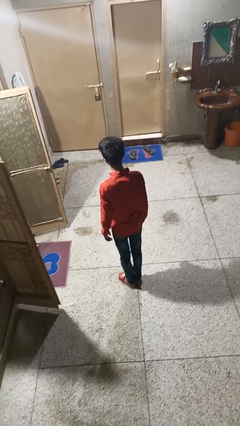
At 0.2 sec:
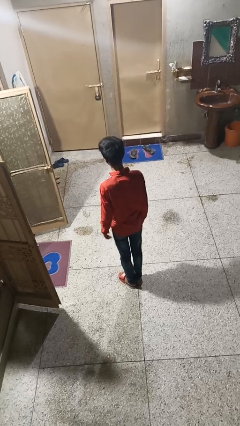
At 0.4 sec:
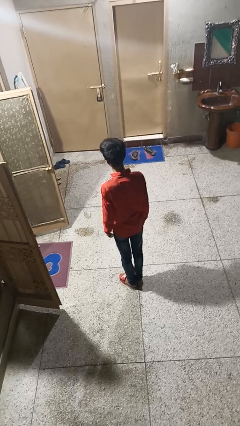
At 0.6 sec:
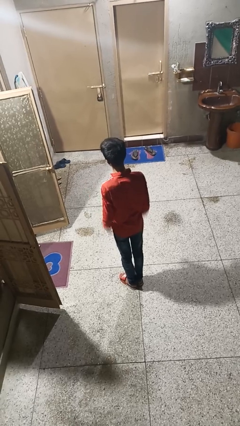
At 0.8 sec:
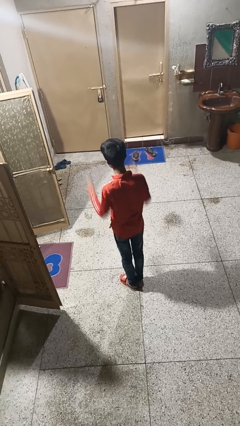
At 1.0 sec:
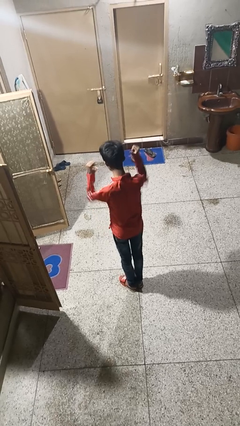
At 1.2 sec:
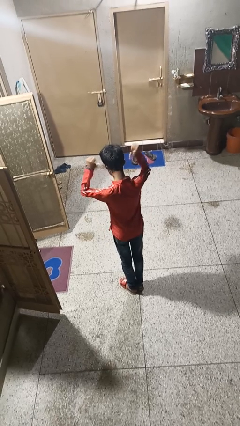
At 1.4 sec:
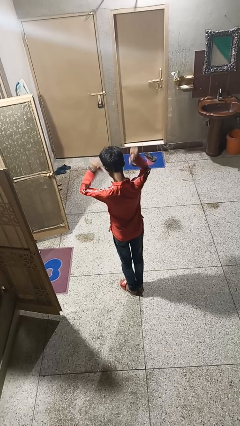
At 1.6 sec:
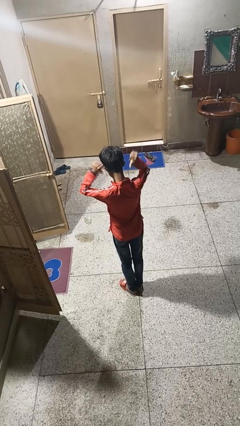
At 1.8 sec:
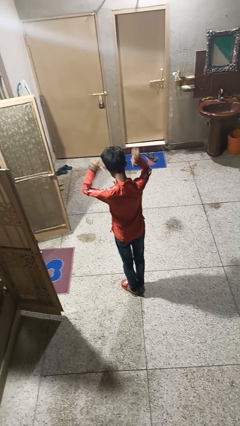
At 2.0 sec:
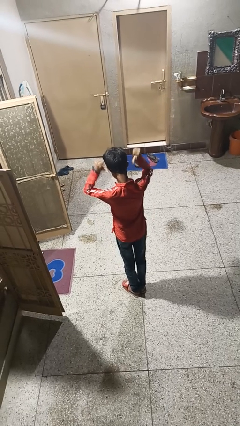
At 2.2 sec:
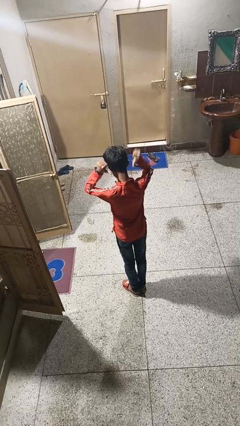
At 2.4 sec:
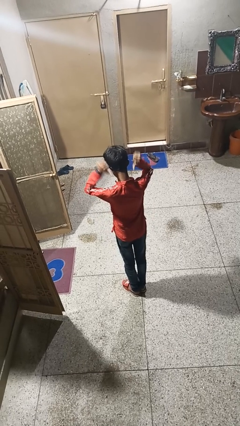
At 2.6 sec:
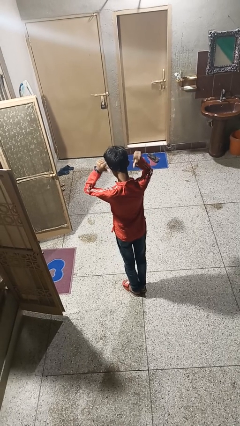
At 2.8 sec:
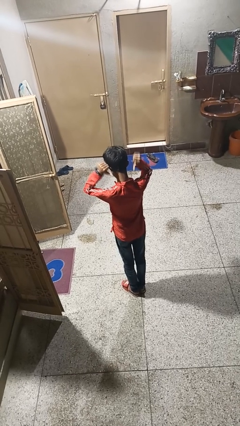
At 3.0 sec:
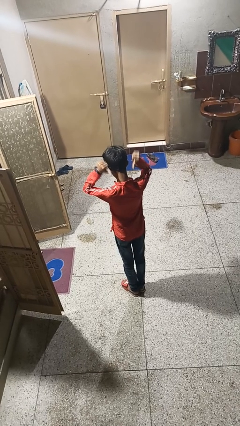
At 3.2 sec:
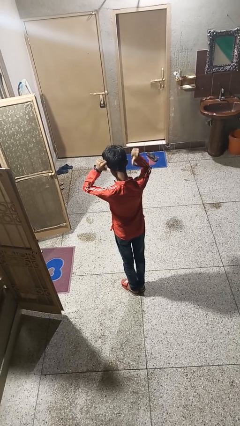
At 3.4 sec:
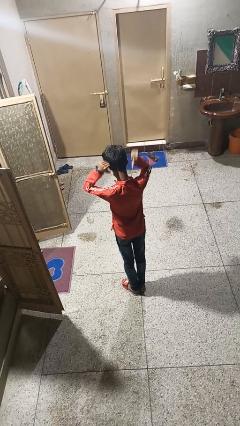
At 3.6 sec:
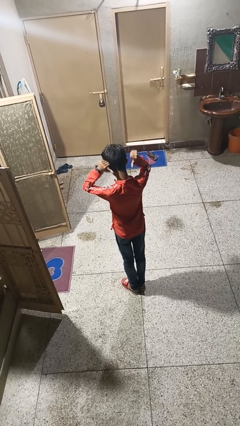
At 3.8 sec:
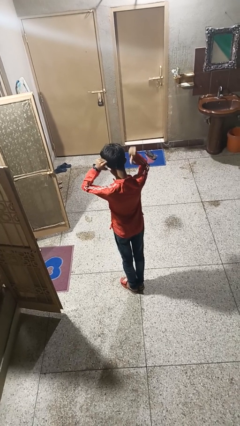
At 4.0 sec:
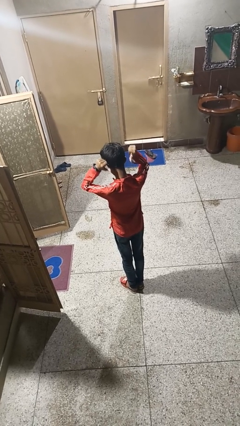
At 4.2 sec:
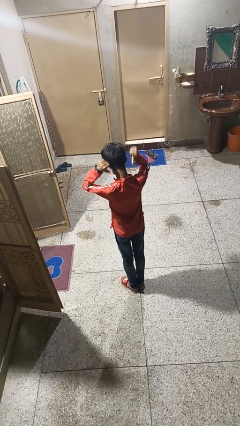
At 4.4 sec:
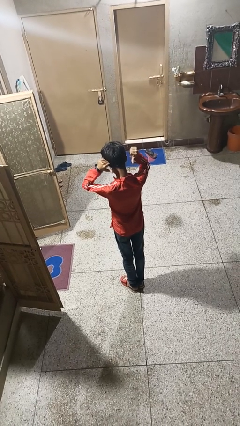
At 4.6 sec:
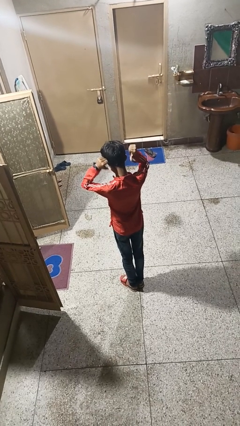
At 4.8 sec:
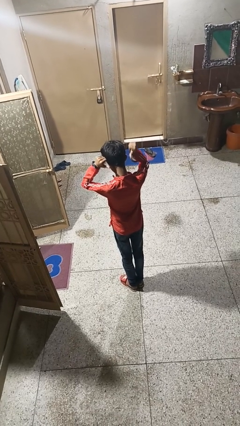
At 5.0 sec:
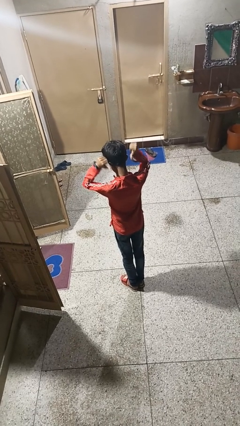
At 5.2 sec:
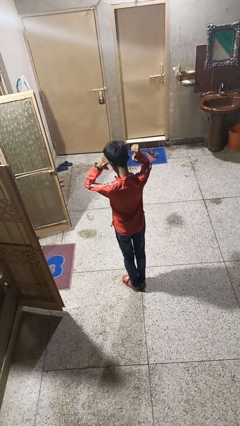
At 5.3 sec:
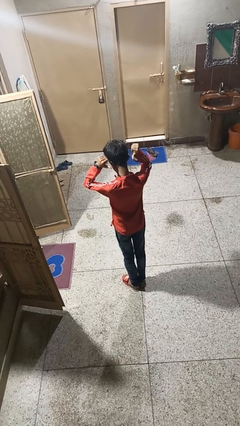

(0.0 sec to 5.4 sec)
person gestures behind me

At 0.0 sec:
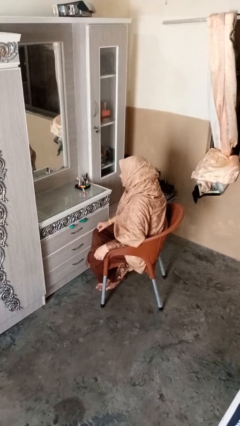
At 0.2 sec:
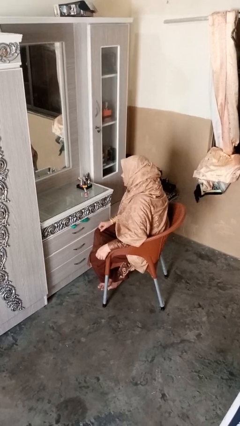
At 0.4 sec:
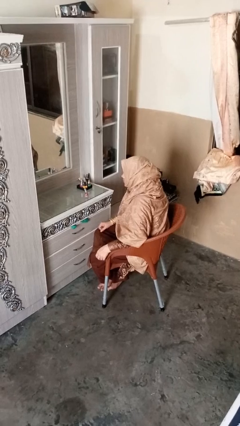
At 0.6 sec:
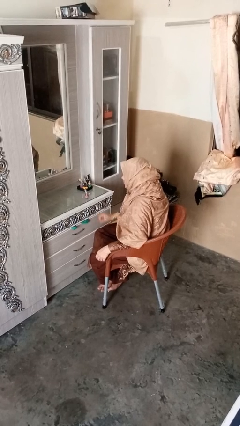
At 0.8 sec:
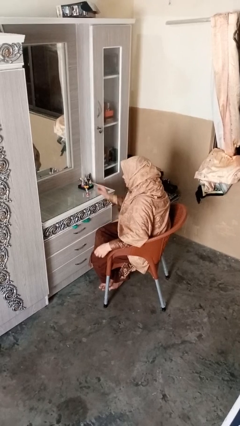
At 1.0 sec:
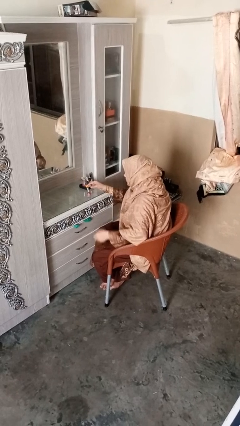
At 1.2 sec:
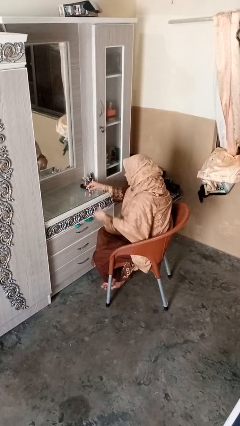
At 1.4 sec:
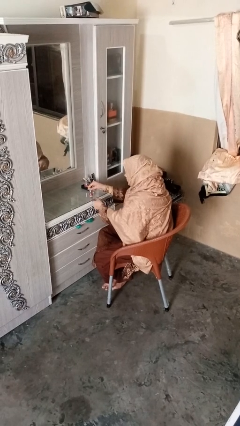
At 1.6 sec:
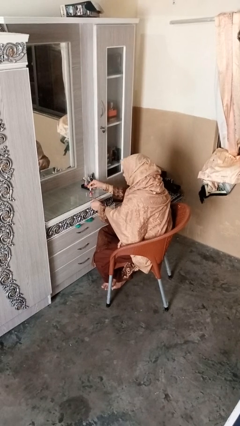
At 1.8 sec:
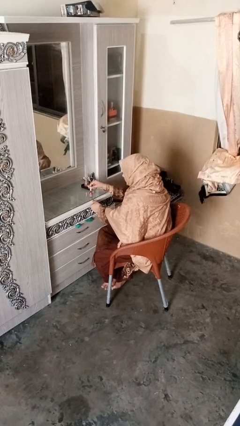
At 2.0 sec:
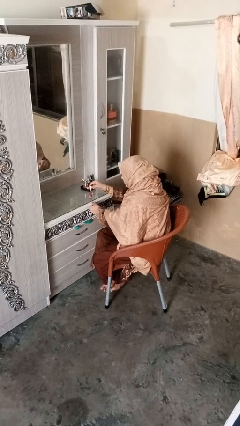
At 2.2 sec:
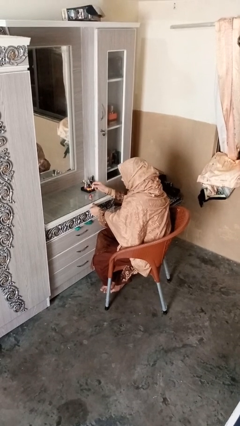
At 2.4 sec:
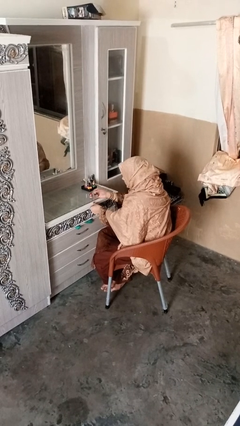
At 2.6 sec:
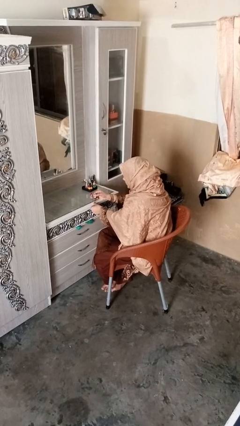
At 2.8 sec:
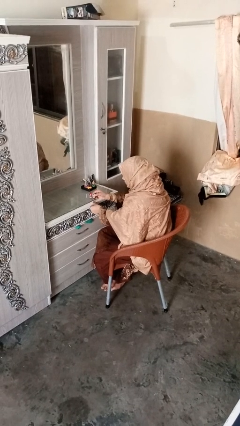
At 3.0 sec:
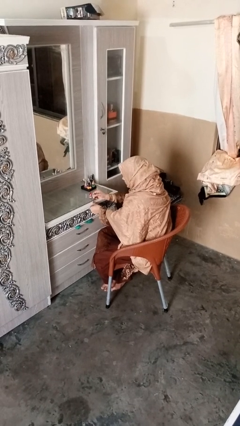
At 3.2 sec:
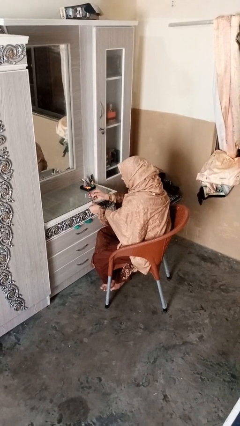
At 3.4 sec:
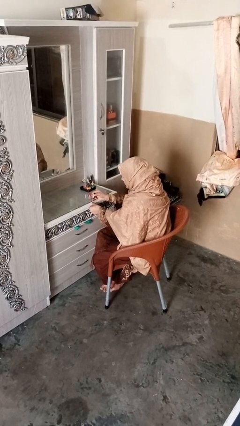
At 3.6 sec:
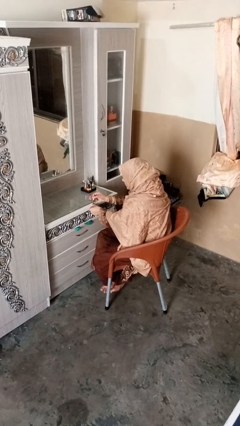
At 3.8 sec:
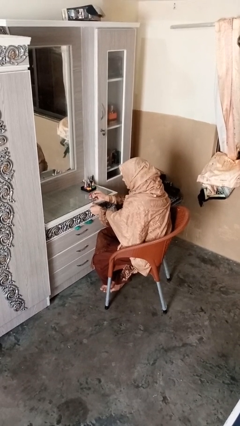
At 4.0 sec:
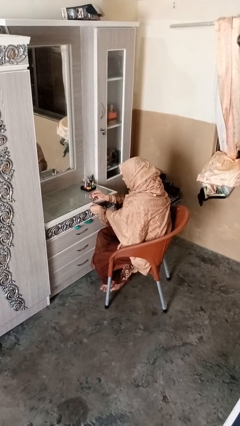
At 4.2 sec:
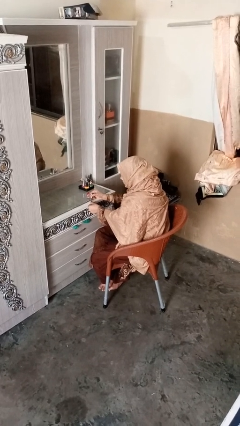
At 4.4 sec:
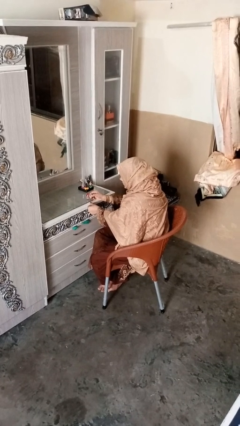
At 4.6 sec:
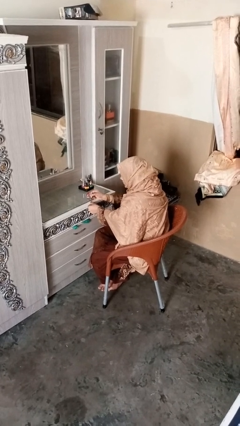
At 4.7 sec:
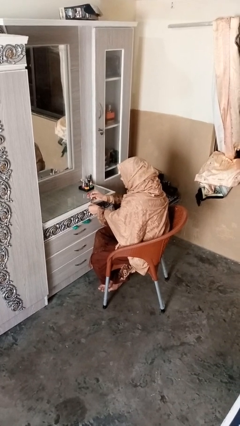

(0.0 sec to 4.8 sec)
person paints fingernails

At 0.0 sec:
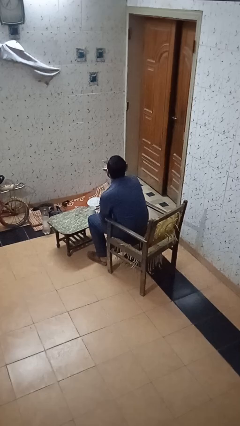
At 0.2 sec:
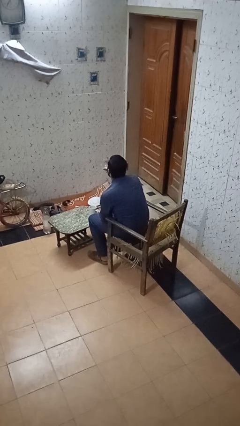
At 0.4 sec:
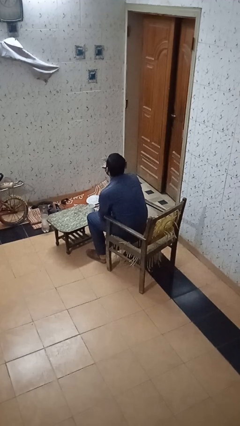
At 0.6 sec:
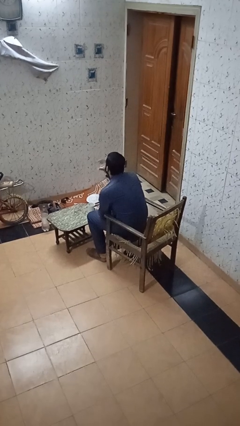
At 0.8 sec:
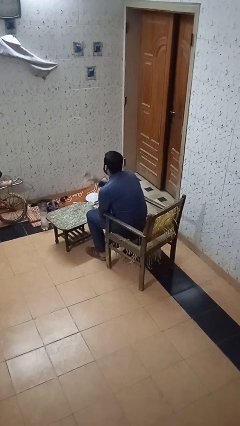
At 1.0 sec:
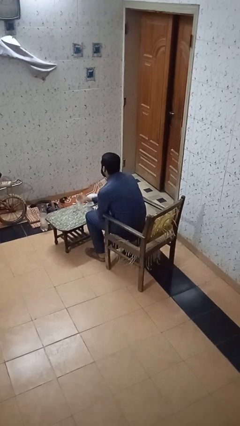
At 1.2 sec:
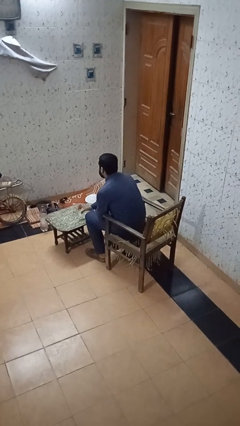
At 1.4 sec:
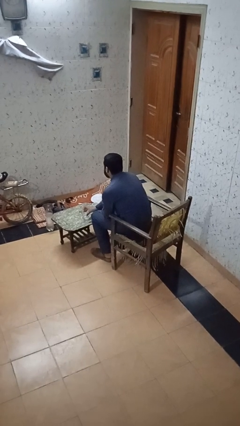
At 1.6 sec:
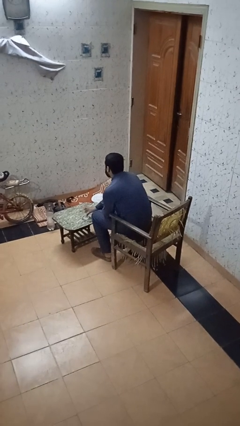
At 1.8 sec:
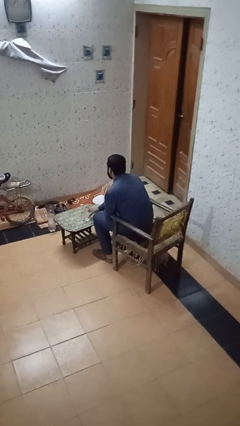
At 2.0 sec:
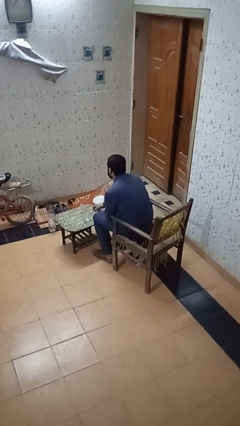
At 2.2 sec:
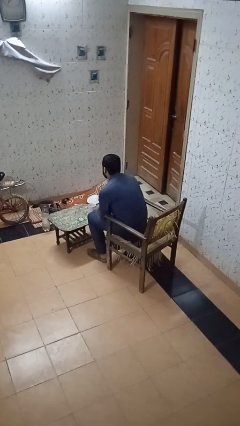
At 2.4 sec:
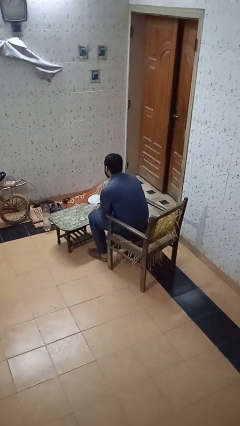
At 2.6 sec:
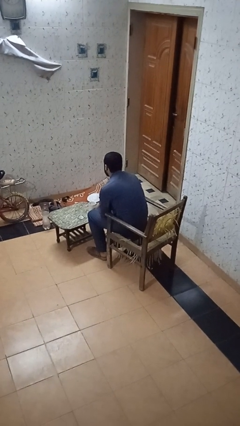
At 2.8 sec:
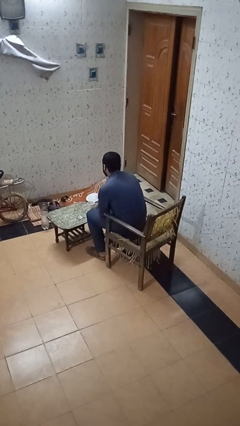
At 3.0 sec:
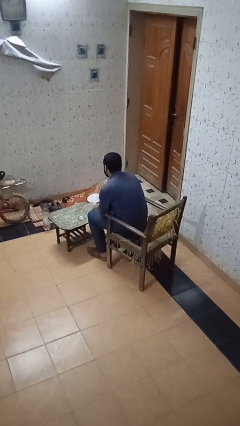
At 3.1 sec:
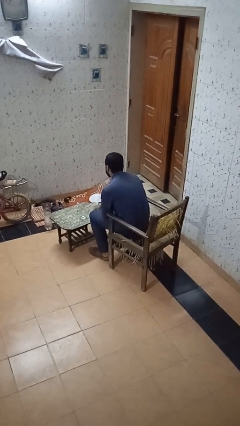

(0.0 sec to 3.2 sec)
person puts down object on table

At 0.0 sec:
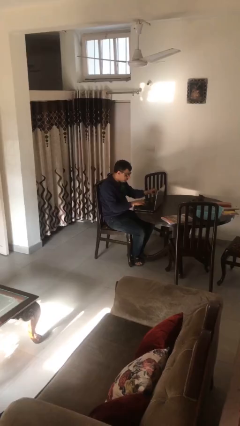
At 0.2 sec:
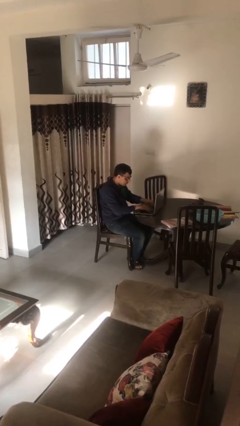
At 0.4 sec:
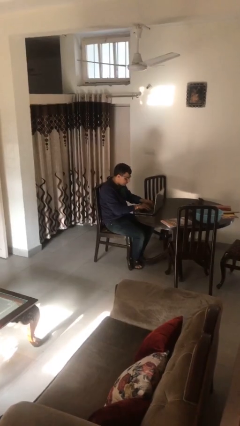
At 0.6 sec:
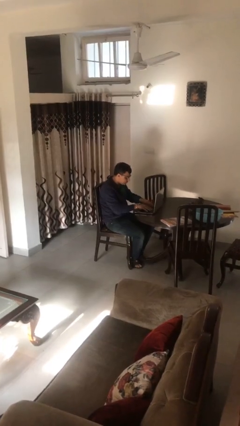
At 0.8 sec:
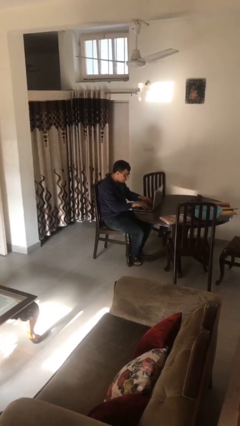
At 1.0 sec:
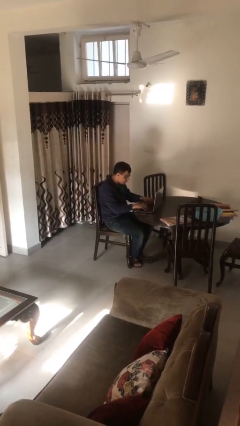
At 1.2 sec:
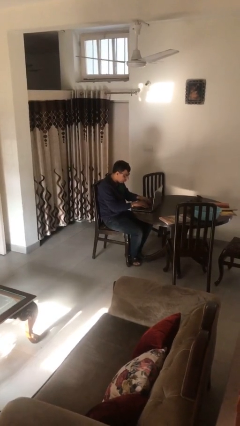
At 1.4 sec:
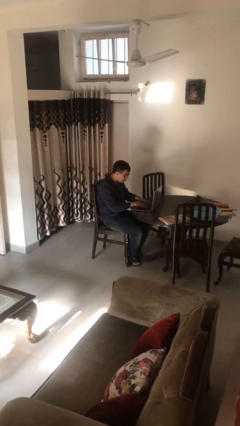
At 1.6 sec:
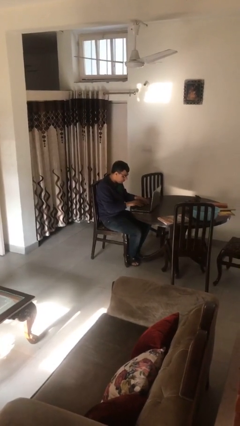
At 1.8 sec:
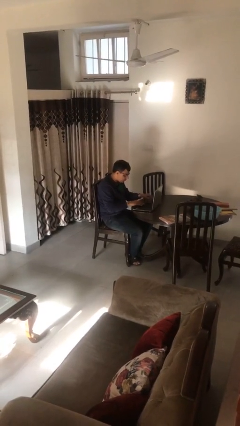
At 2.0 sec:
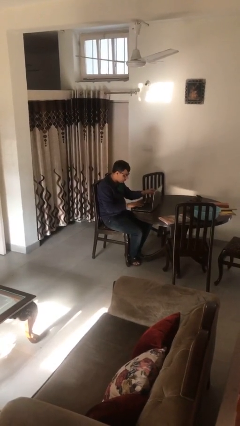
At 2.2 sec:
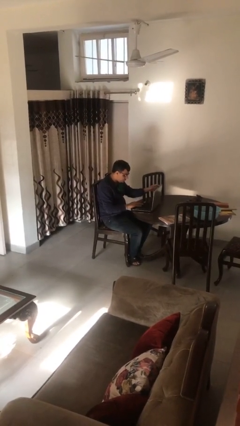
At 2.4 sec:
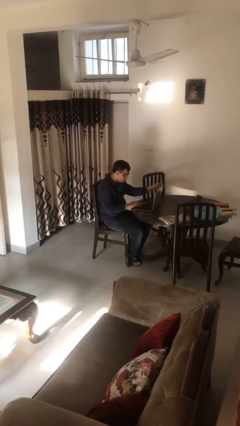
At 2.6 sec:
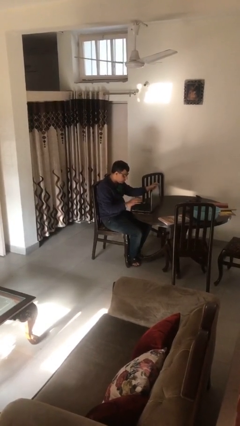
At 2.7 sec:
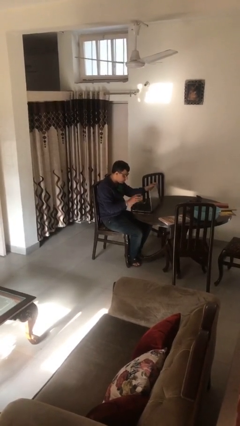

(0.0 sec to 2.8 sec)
person interacts with laptop

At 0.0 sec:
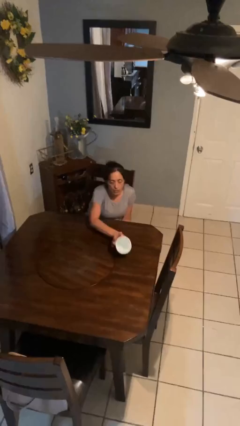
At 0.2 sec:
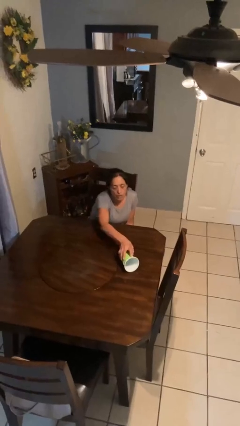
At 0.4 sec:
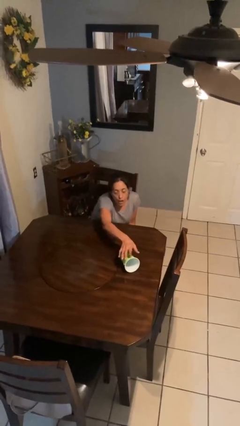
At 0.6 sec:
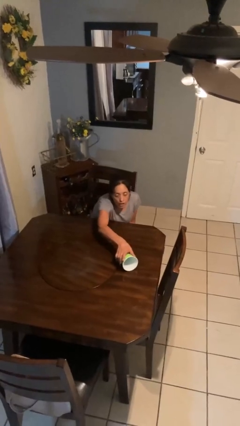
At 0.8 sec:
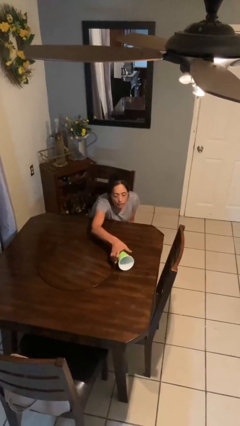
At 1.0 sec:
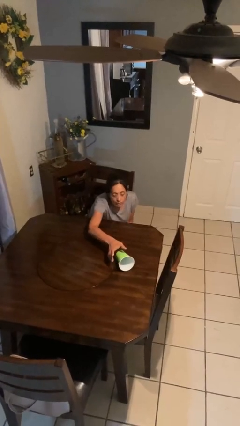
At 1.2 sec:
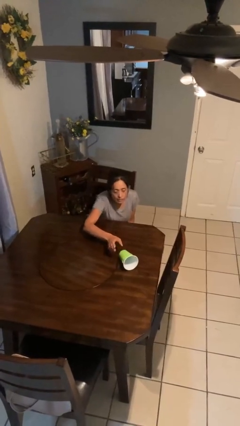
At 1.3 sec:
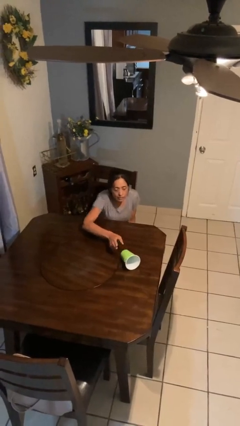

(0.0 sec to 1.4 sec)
person knocks over glass
